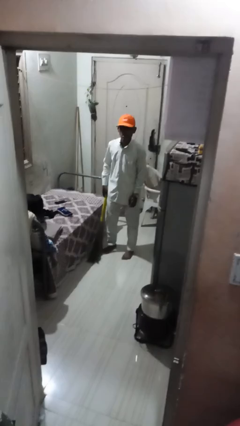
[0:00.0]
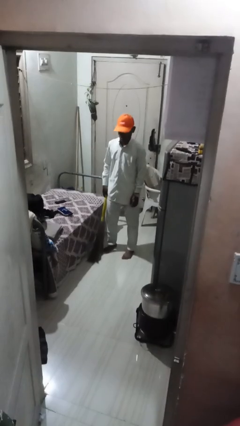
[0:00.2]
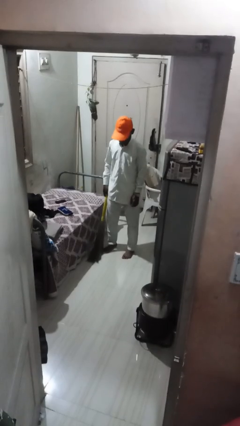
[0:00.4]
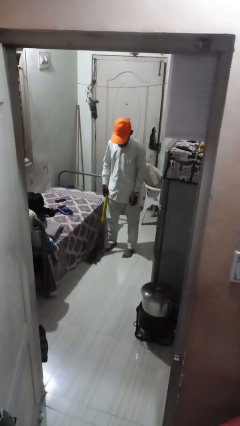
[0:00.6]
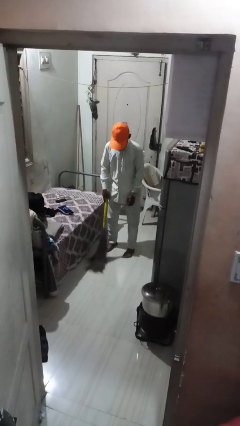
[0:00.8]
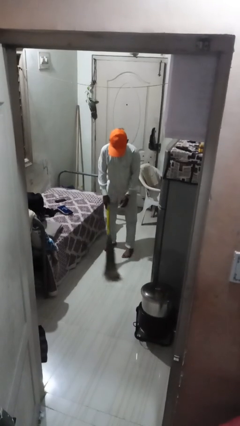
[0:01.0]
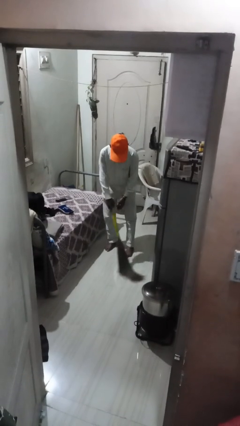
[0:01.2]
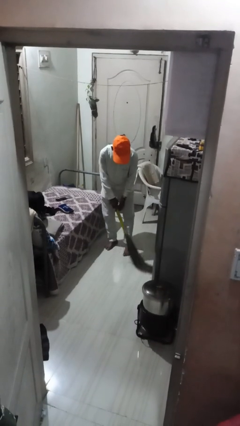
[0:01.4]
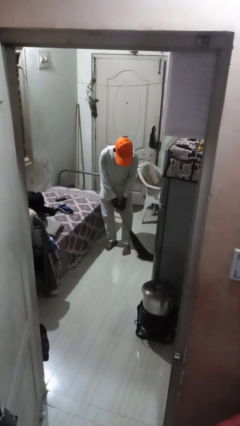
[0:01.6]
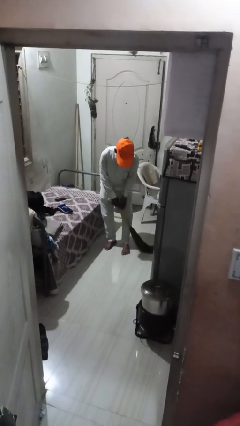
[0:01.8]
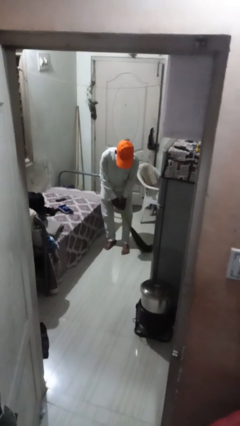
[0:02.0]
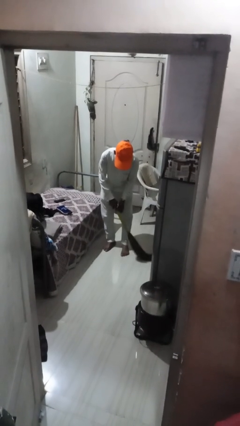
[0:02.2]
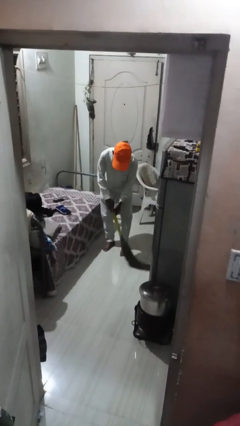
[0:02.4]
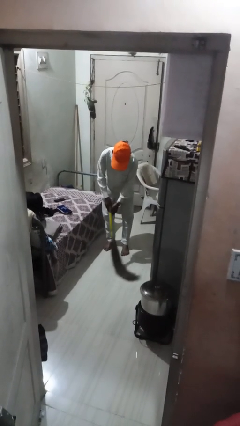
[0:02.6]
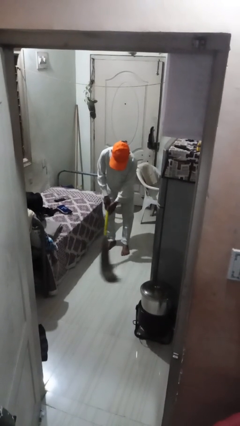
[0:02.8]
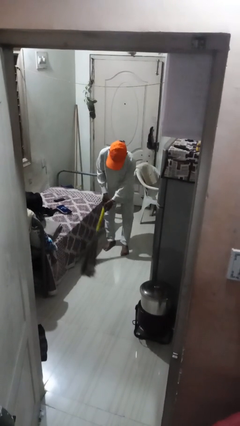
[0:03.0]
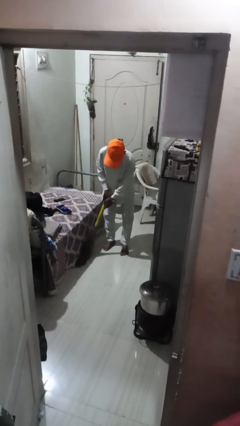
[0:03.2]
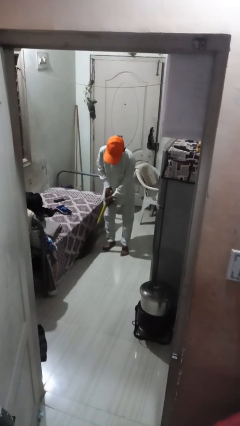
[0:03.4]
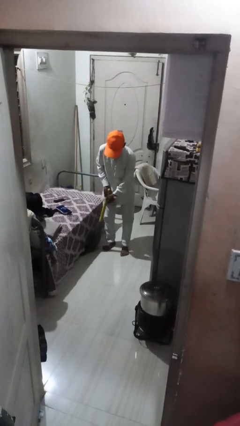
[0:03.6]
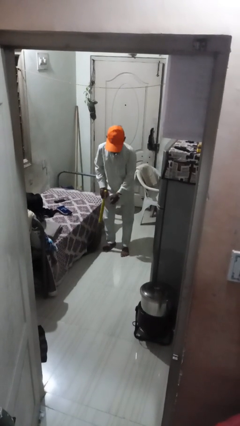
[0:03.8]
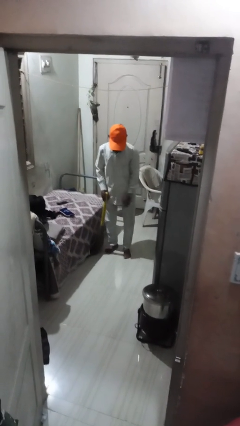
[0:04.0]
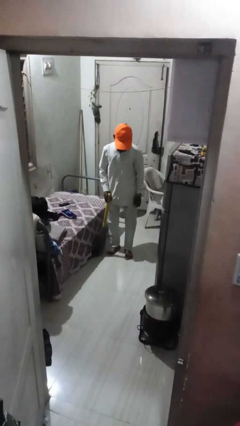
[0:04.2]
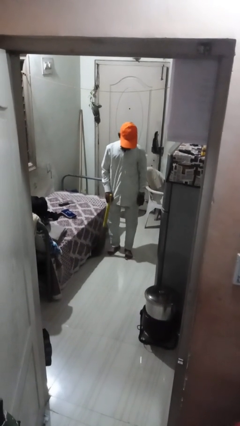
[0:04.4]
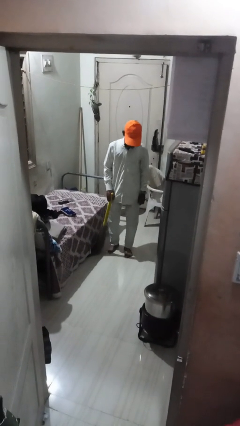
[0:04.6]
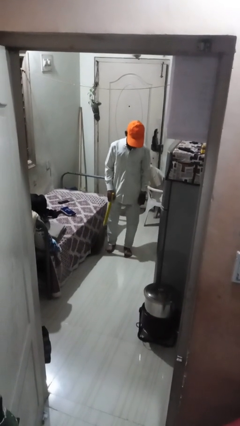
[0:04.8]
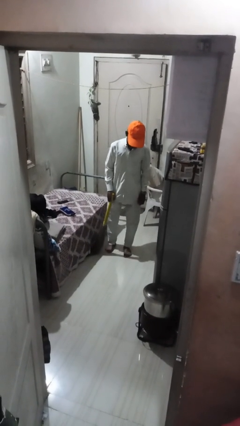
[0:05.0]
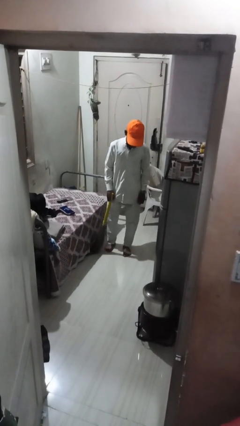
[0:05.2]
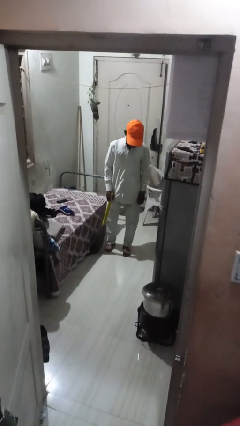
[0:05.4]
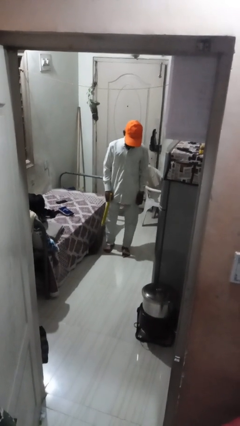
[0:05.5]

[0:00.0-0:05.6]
person sweeps floor

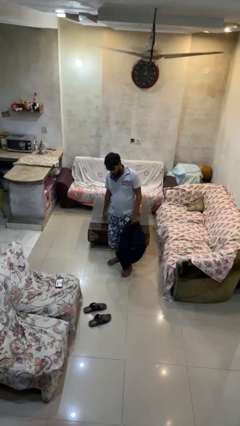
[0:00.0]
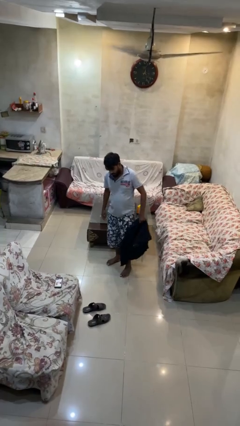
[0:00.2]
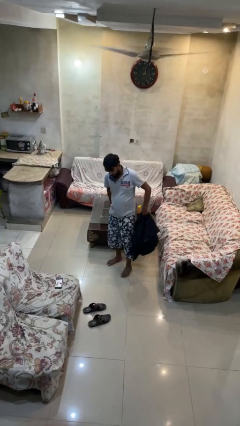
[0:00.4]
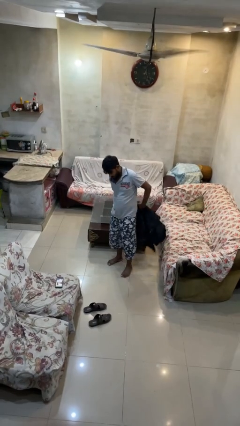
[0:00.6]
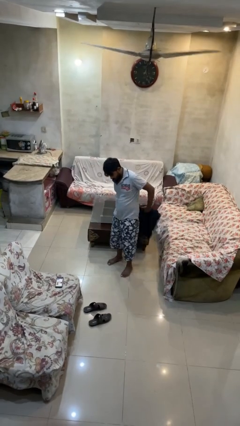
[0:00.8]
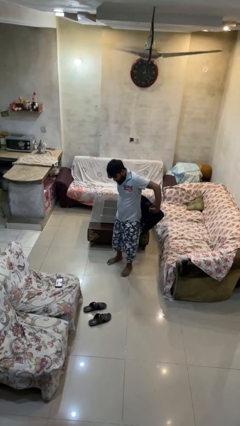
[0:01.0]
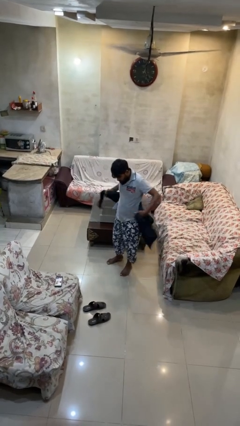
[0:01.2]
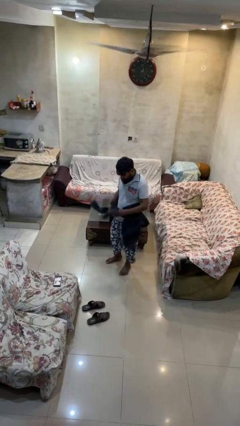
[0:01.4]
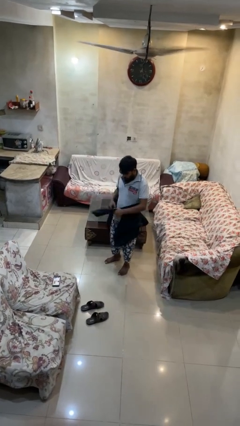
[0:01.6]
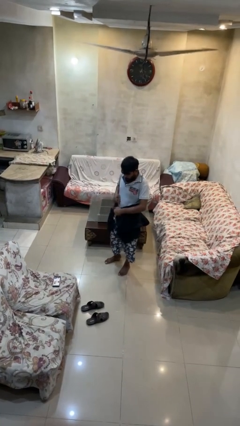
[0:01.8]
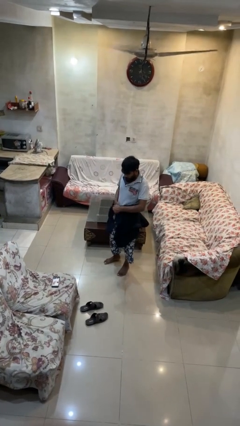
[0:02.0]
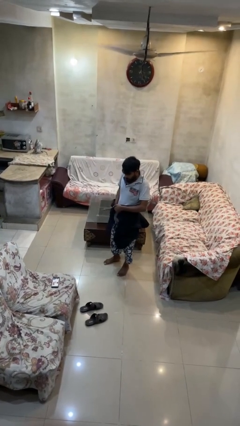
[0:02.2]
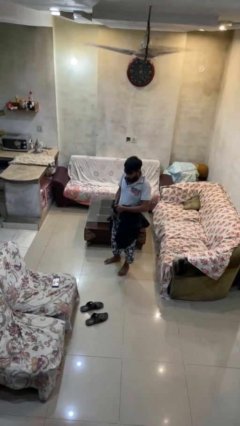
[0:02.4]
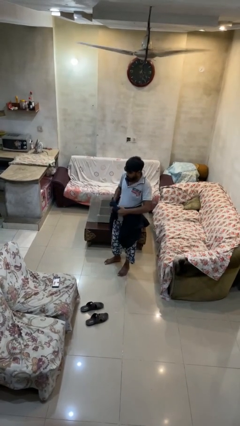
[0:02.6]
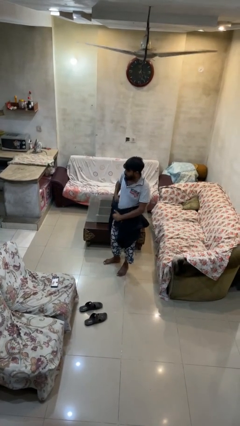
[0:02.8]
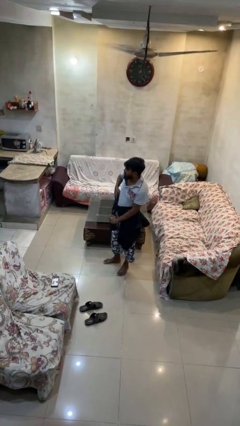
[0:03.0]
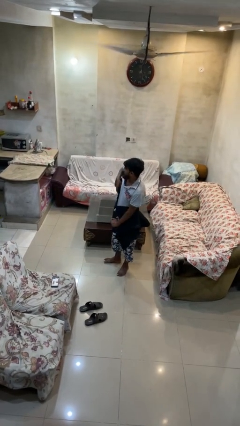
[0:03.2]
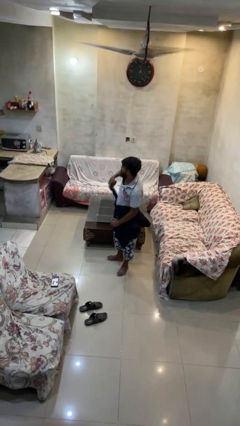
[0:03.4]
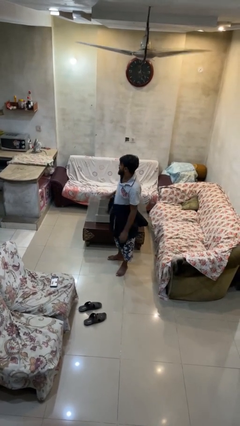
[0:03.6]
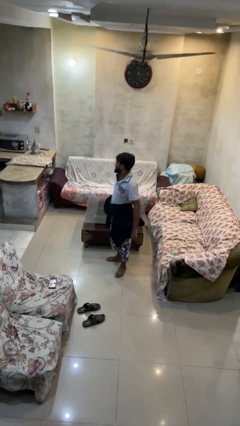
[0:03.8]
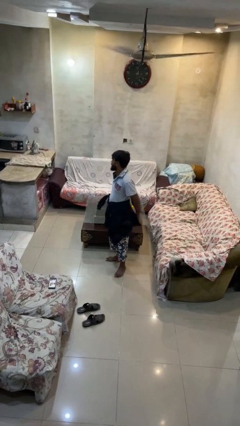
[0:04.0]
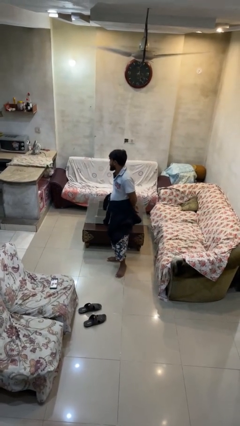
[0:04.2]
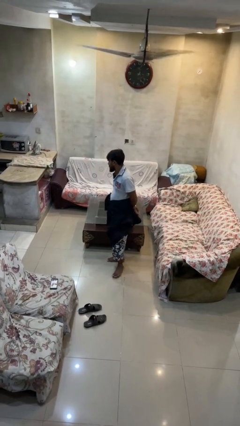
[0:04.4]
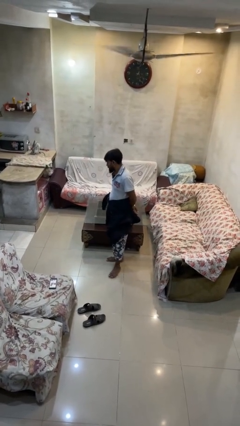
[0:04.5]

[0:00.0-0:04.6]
person ties jacket around waist

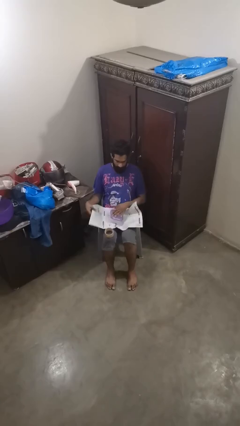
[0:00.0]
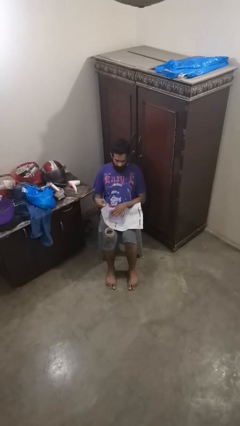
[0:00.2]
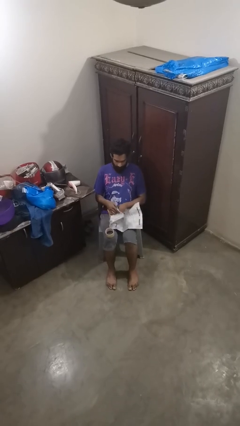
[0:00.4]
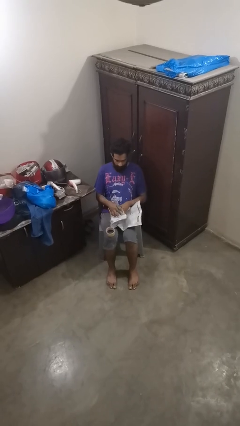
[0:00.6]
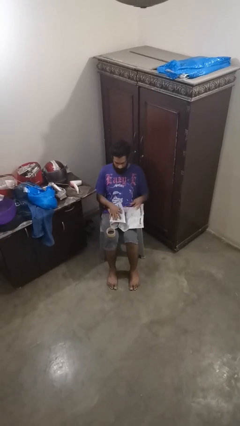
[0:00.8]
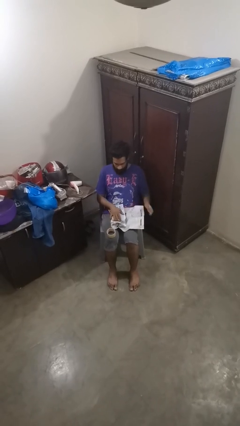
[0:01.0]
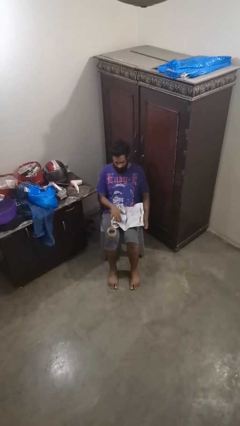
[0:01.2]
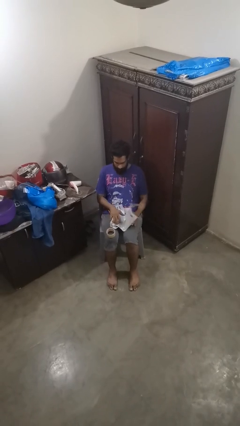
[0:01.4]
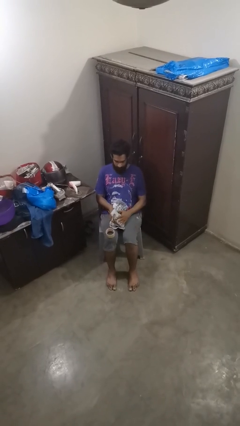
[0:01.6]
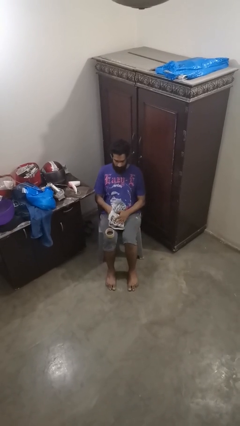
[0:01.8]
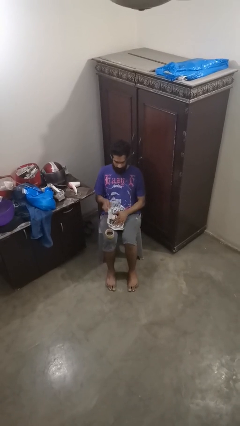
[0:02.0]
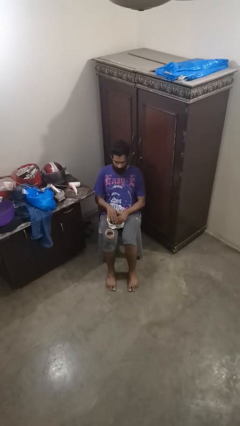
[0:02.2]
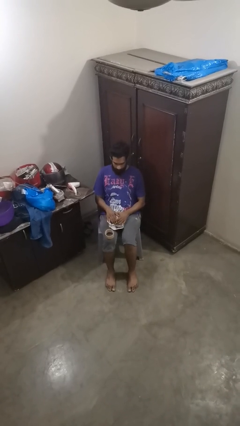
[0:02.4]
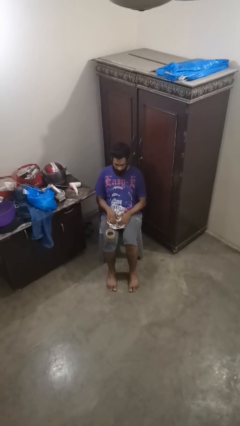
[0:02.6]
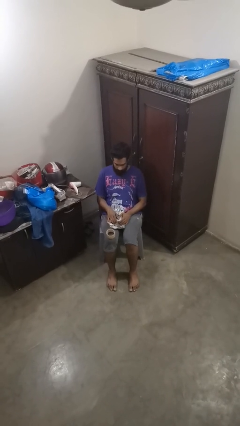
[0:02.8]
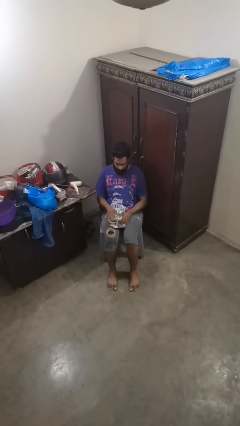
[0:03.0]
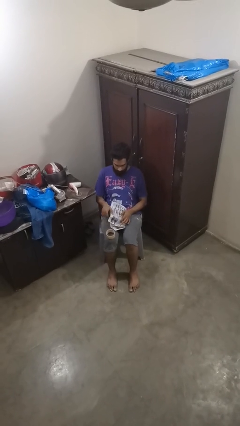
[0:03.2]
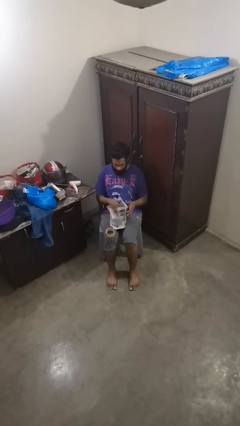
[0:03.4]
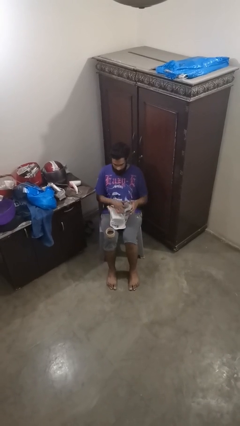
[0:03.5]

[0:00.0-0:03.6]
person wraps box

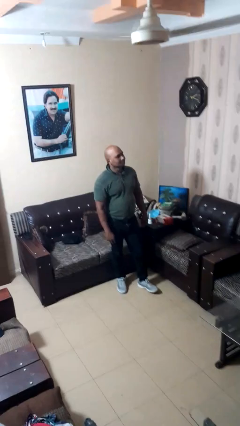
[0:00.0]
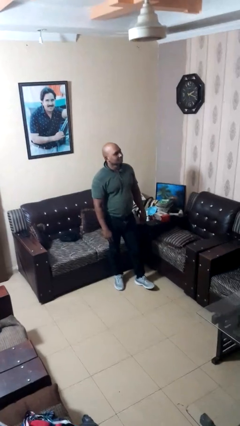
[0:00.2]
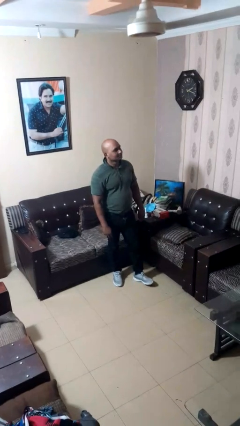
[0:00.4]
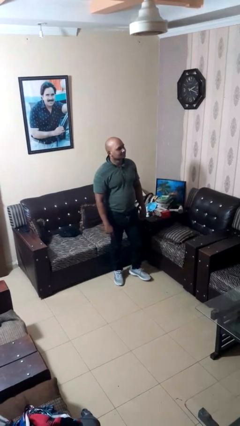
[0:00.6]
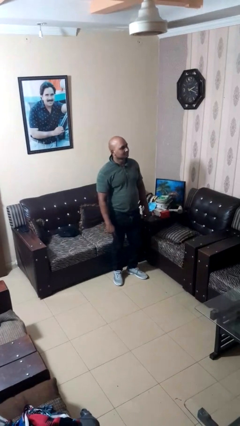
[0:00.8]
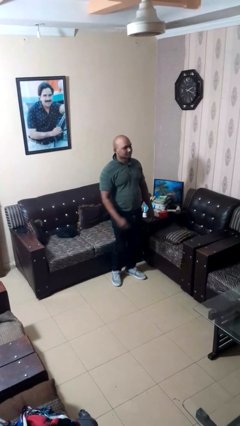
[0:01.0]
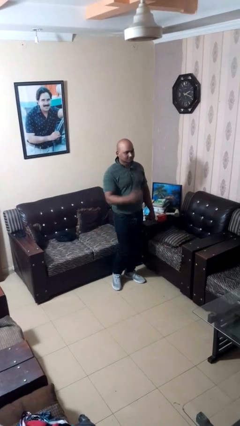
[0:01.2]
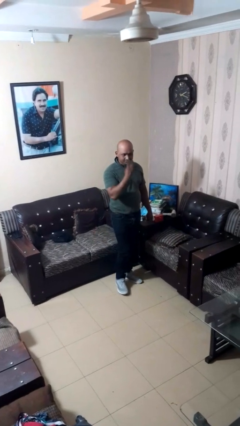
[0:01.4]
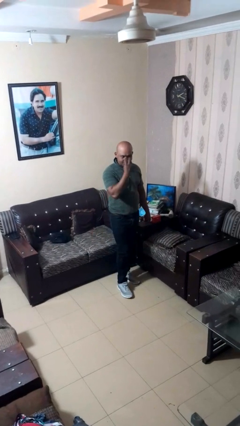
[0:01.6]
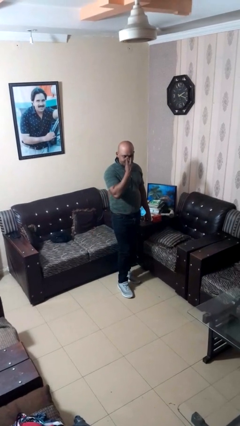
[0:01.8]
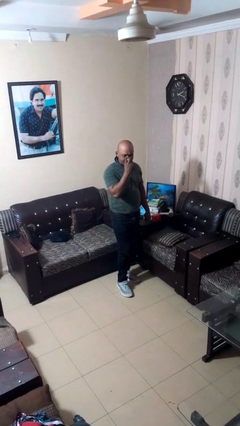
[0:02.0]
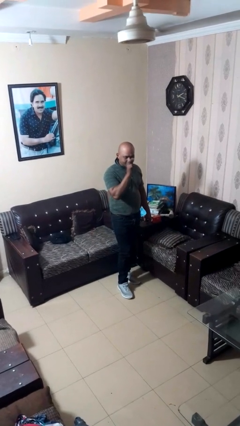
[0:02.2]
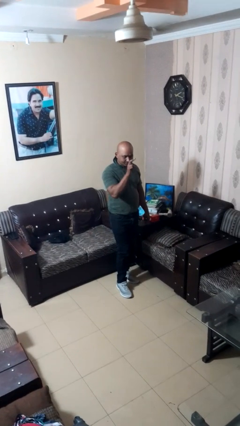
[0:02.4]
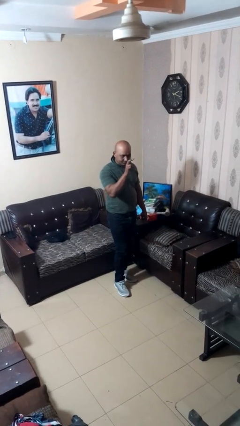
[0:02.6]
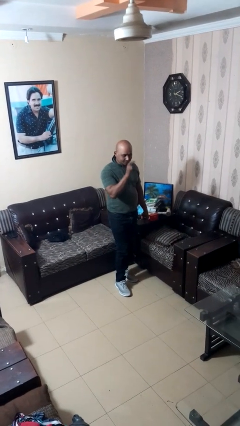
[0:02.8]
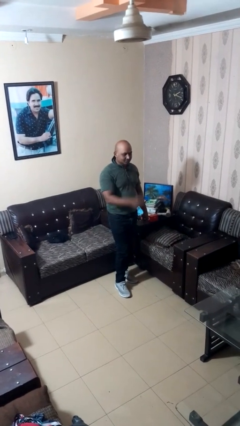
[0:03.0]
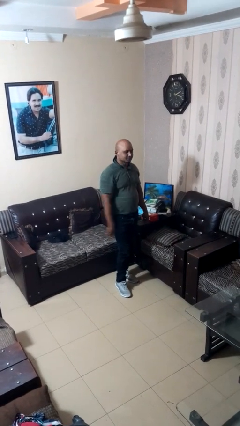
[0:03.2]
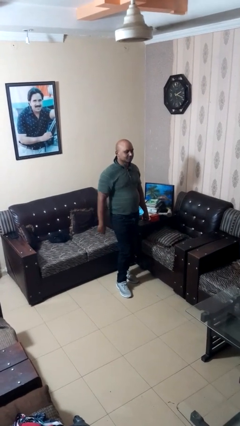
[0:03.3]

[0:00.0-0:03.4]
person gestures watch closely

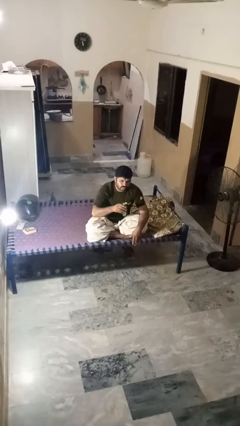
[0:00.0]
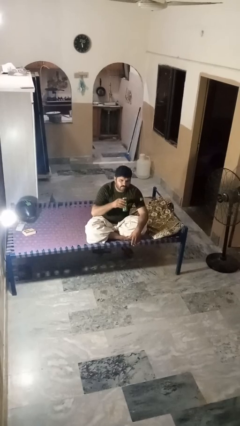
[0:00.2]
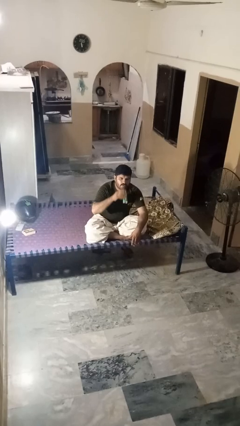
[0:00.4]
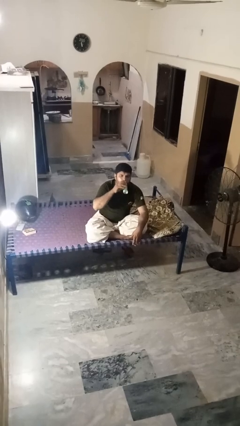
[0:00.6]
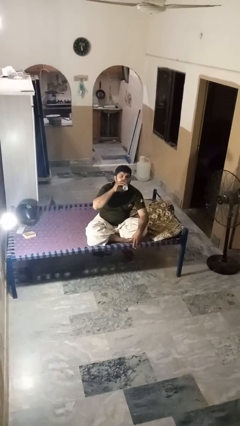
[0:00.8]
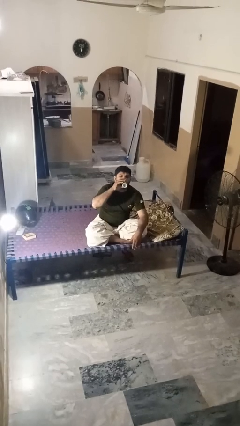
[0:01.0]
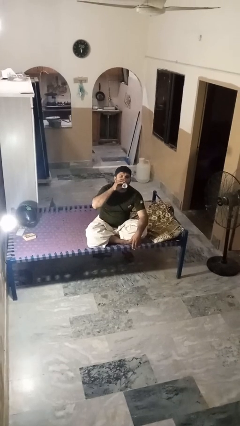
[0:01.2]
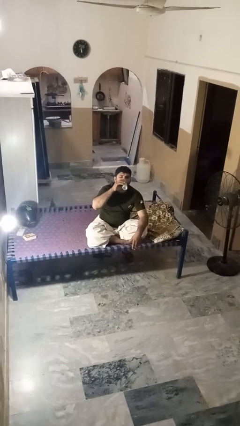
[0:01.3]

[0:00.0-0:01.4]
person drinks from beverage can
